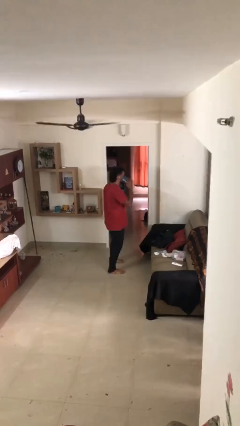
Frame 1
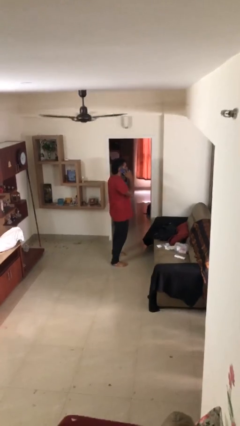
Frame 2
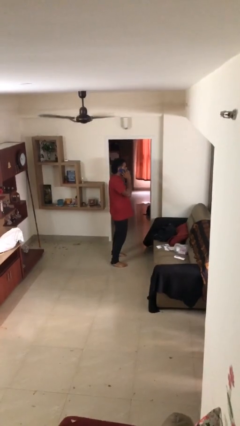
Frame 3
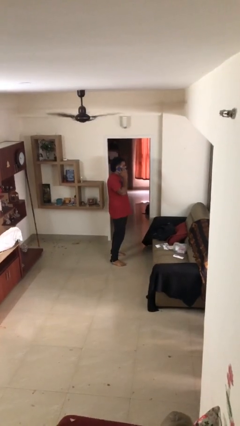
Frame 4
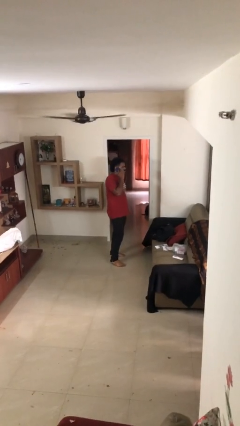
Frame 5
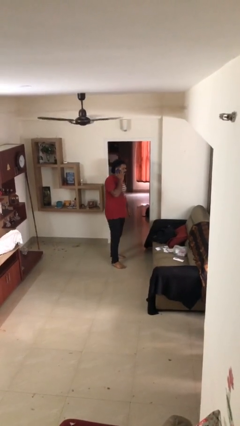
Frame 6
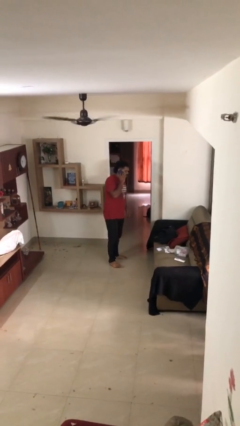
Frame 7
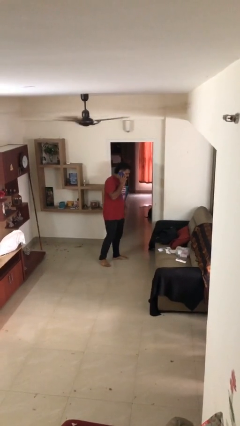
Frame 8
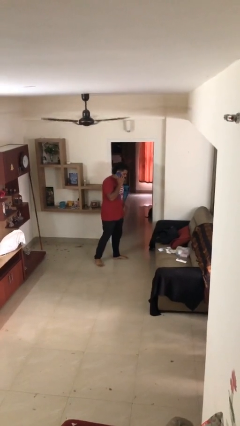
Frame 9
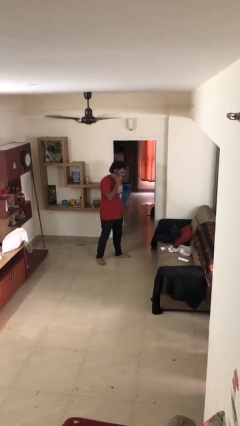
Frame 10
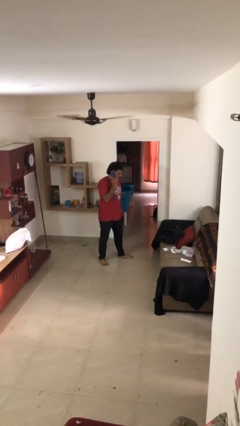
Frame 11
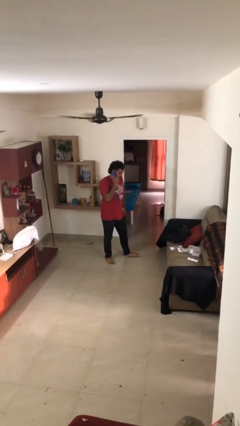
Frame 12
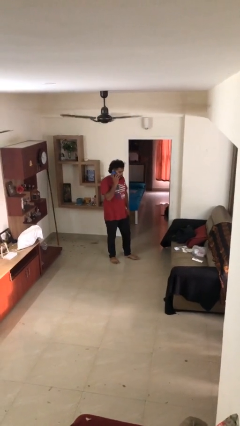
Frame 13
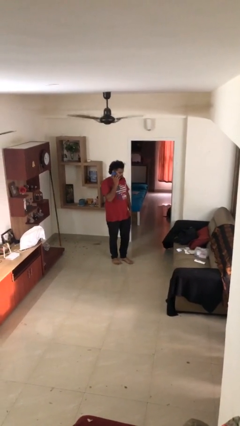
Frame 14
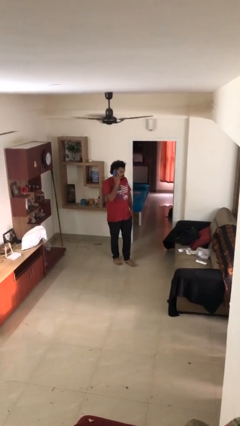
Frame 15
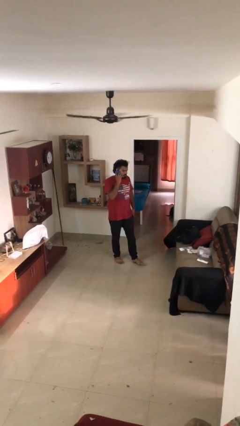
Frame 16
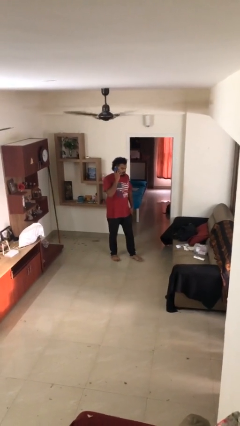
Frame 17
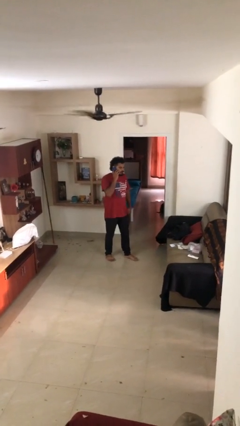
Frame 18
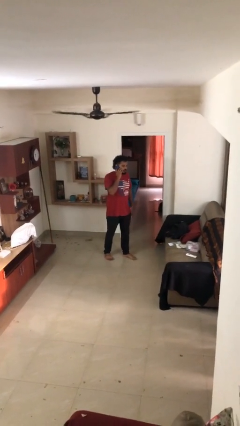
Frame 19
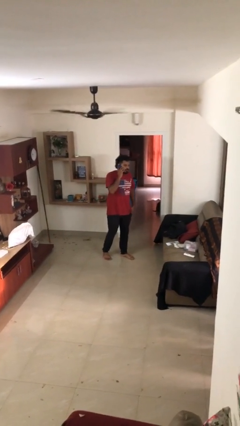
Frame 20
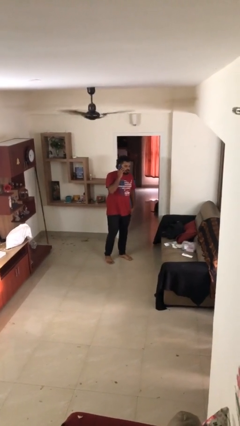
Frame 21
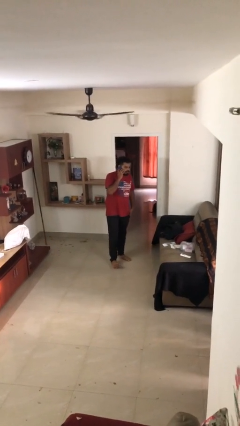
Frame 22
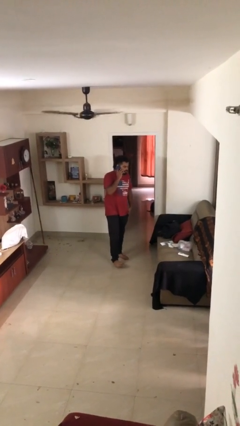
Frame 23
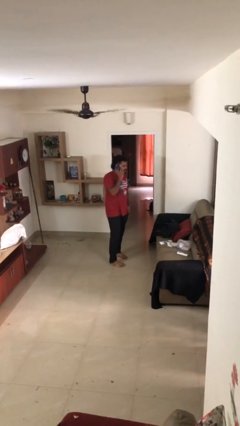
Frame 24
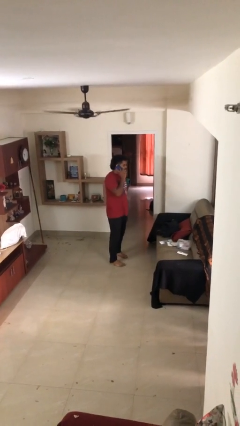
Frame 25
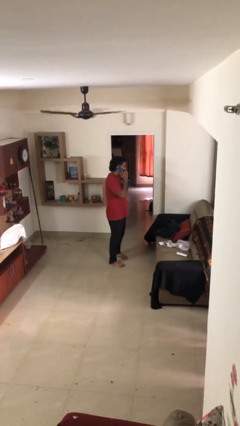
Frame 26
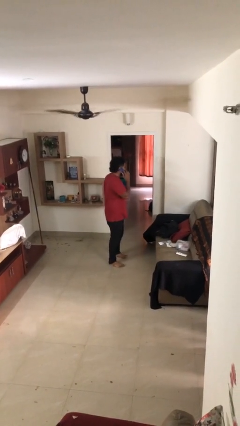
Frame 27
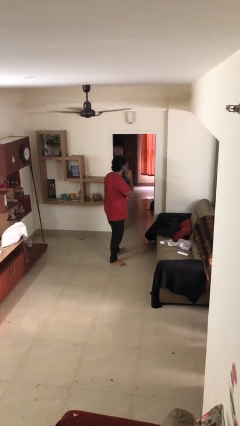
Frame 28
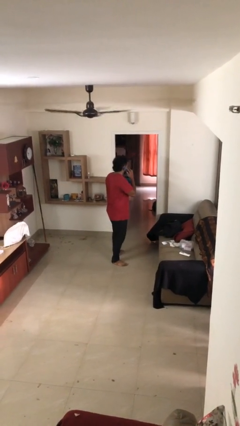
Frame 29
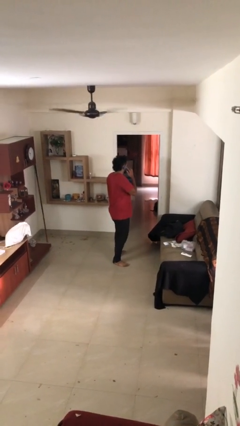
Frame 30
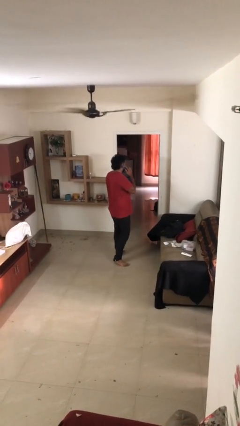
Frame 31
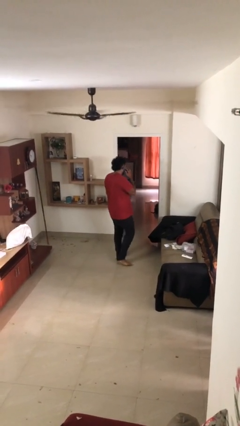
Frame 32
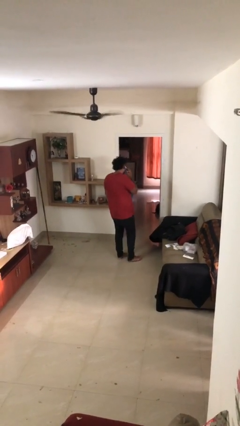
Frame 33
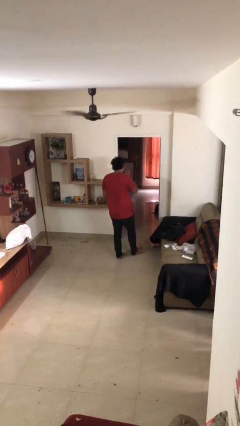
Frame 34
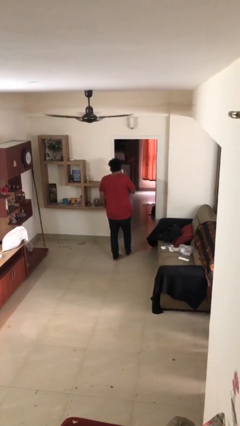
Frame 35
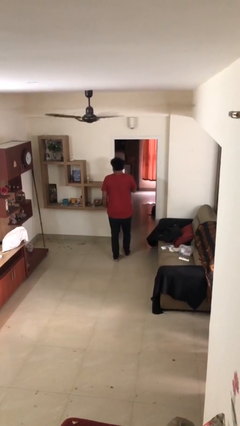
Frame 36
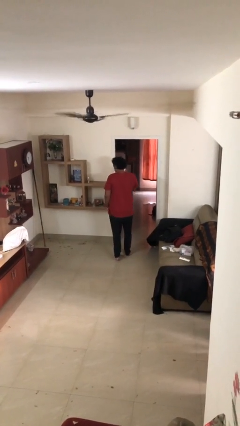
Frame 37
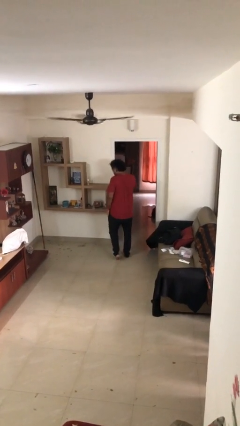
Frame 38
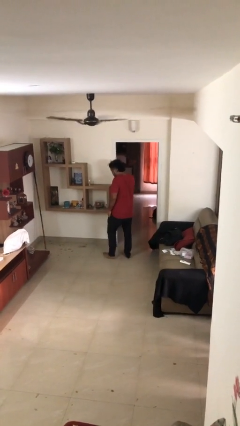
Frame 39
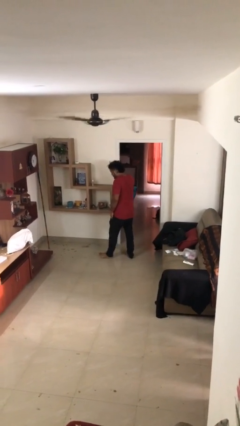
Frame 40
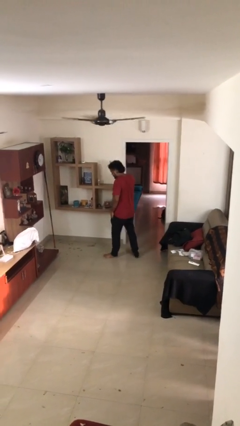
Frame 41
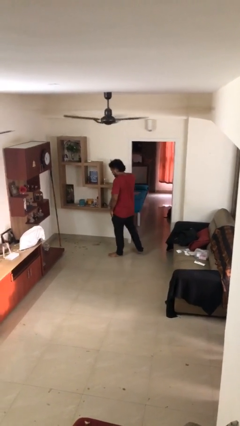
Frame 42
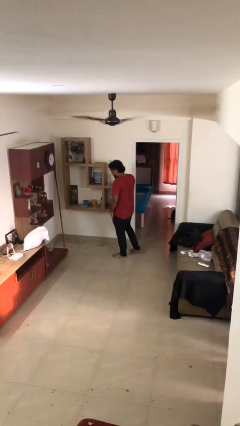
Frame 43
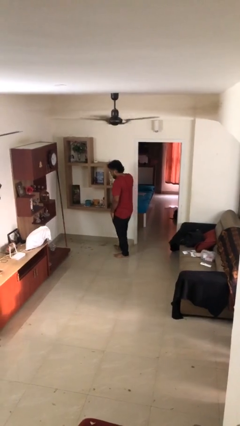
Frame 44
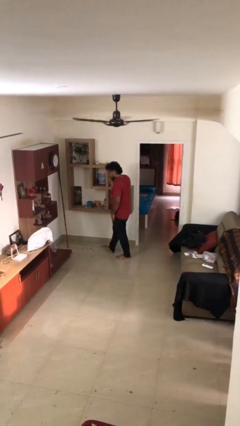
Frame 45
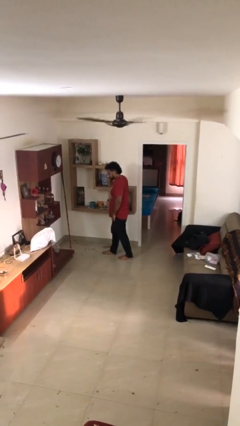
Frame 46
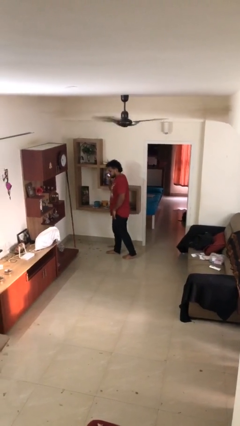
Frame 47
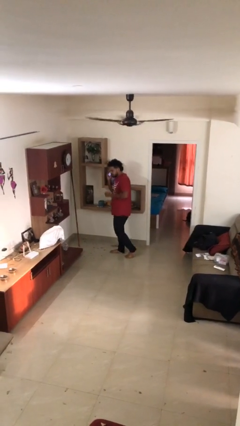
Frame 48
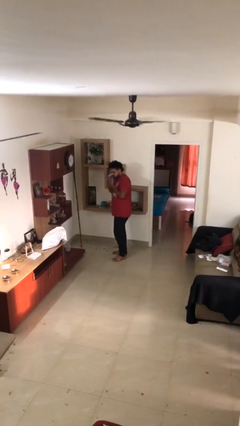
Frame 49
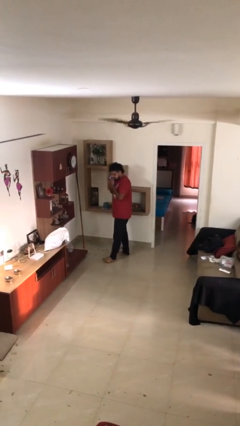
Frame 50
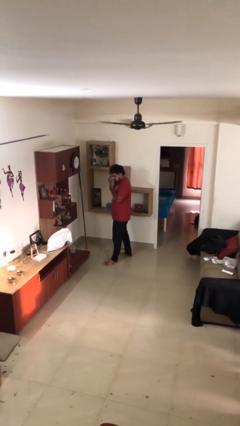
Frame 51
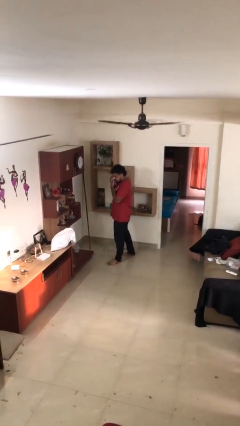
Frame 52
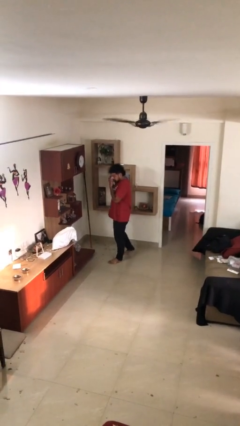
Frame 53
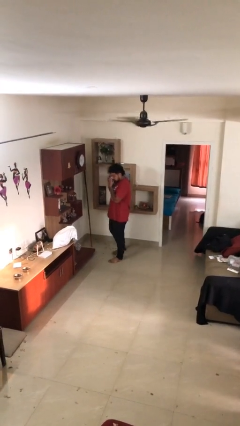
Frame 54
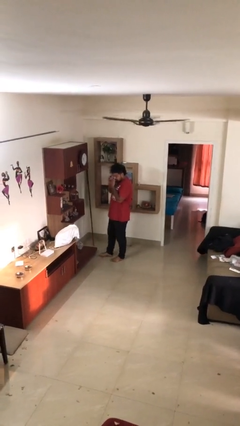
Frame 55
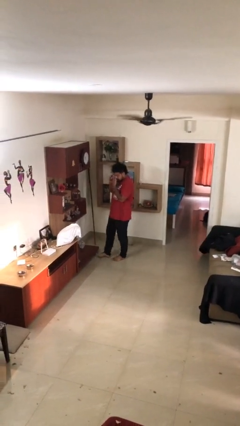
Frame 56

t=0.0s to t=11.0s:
person talks on phone

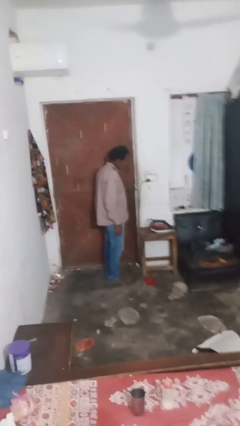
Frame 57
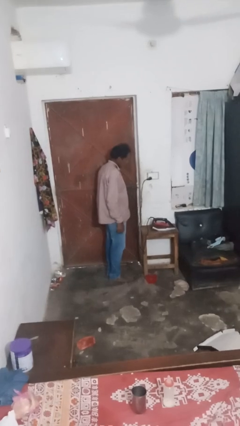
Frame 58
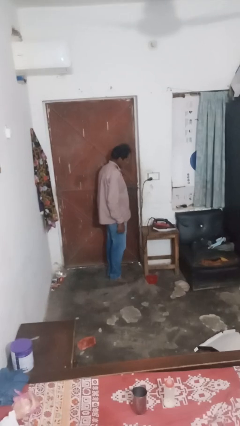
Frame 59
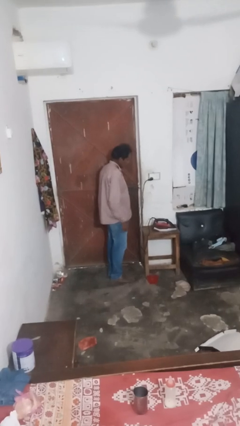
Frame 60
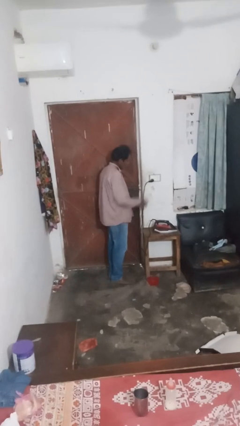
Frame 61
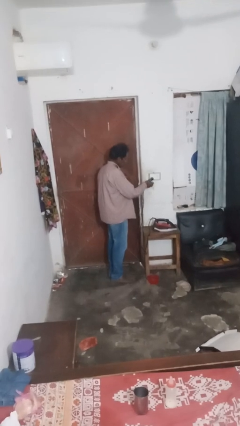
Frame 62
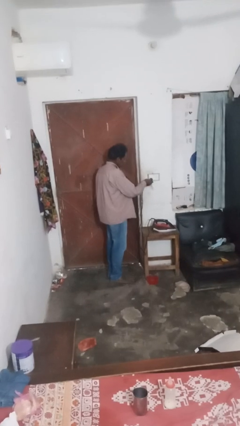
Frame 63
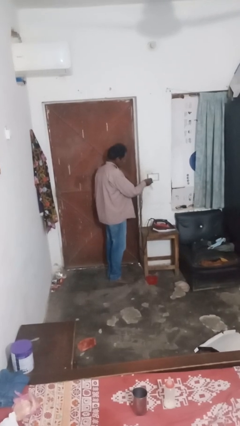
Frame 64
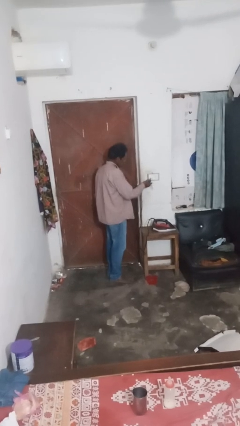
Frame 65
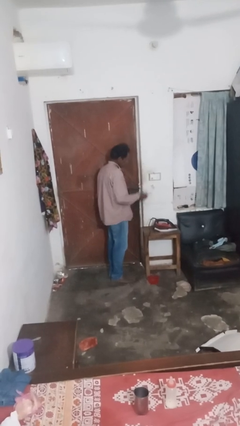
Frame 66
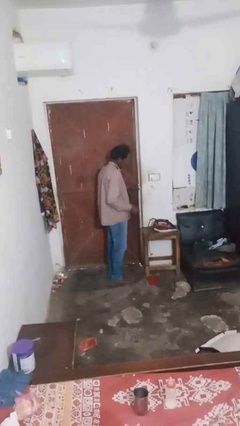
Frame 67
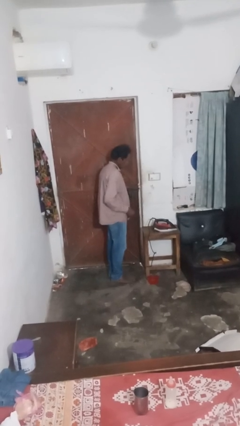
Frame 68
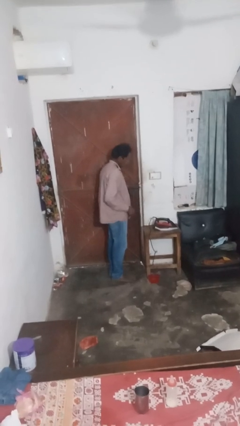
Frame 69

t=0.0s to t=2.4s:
person unplugs from electrical socket

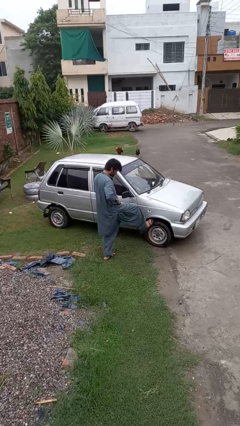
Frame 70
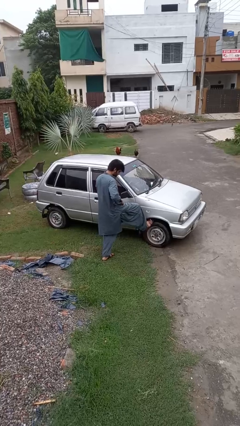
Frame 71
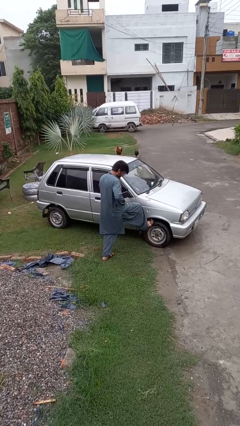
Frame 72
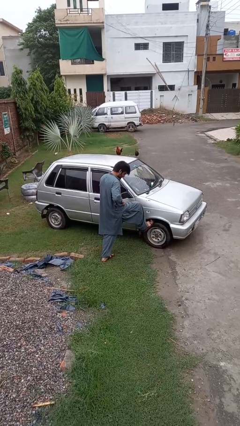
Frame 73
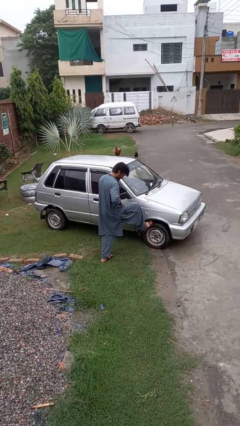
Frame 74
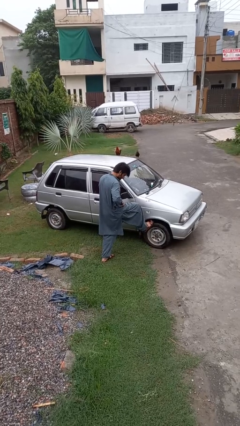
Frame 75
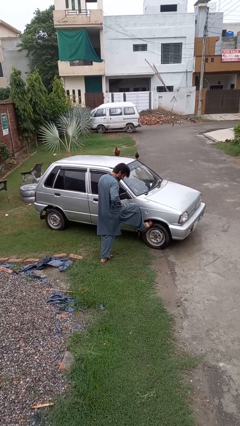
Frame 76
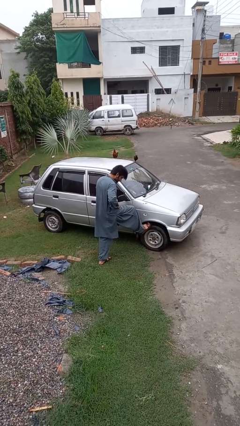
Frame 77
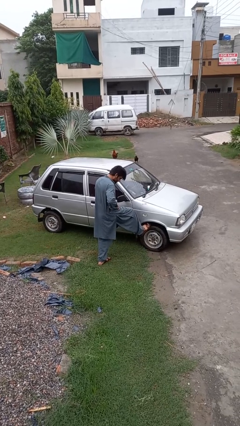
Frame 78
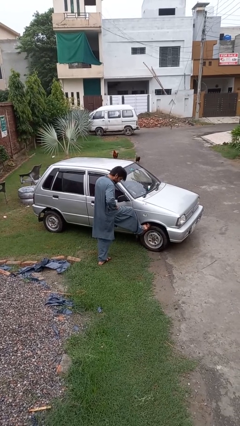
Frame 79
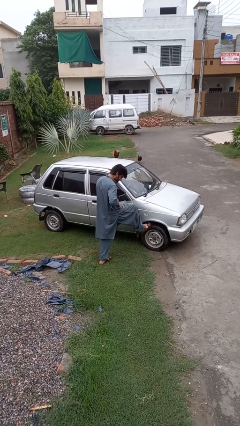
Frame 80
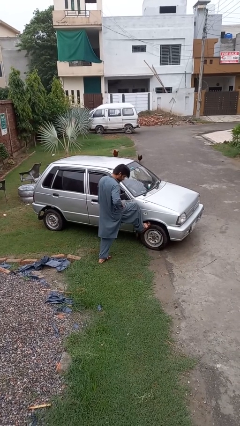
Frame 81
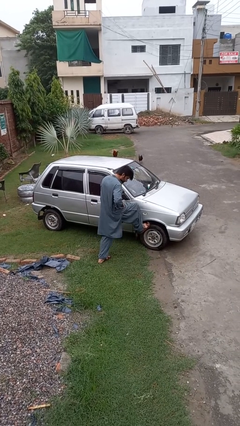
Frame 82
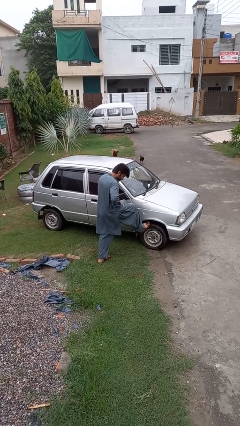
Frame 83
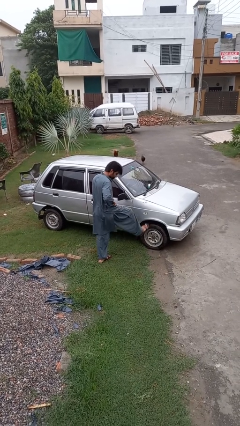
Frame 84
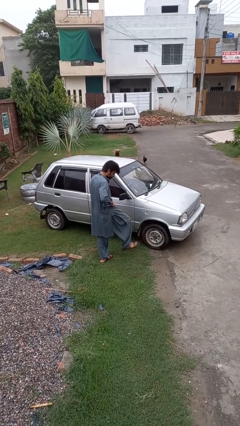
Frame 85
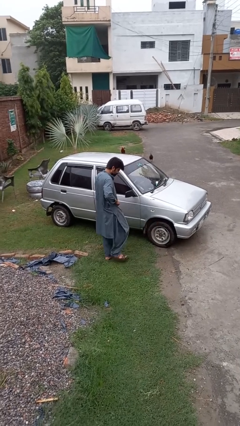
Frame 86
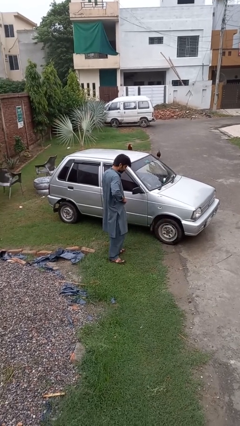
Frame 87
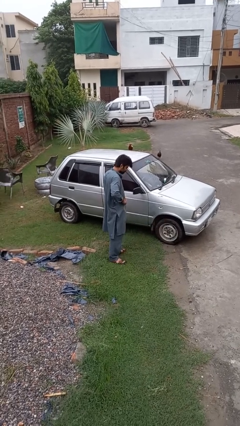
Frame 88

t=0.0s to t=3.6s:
person kicks car tires

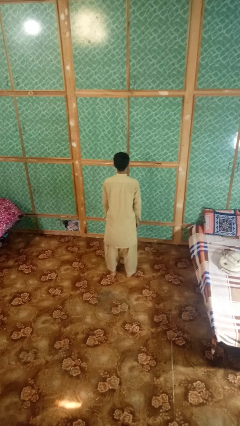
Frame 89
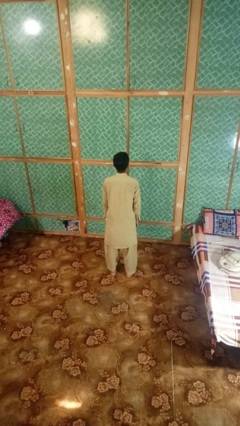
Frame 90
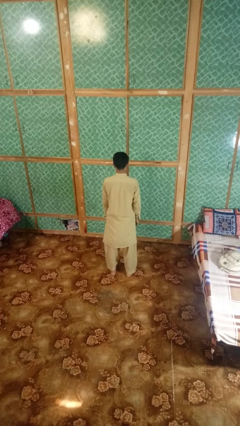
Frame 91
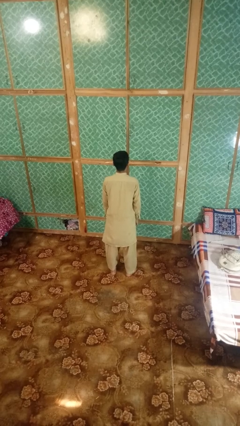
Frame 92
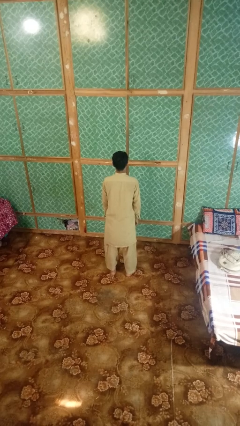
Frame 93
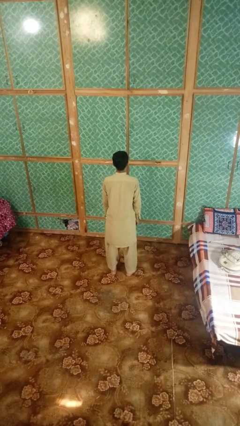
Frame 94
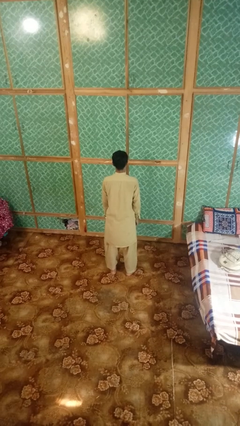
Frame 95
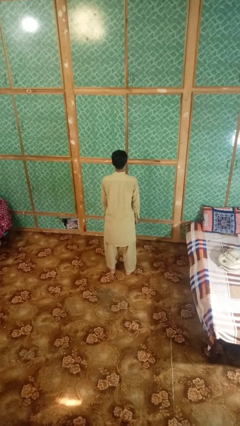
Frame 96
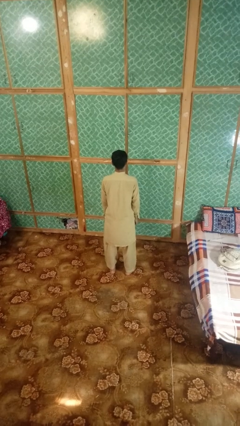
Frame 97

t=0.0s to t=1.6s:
person shakes head
